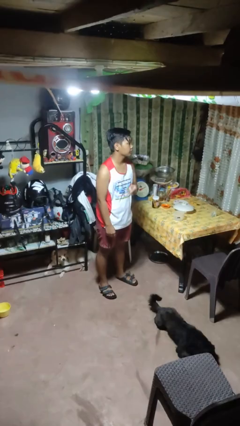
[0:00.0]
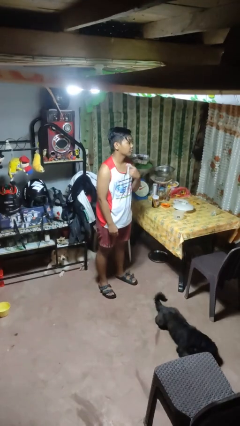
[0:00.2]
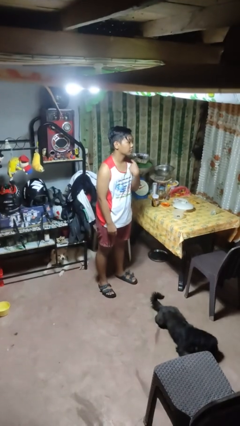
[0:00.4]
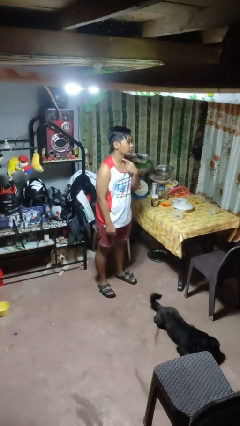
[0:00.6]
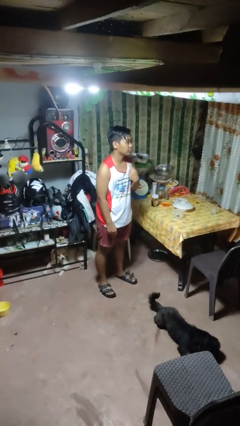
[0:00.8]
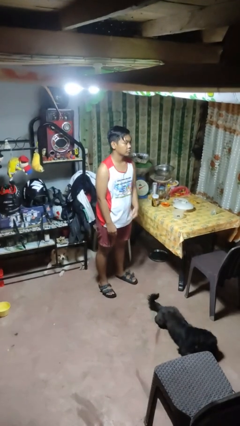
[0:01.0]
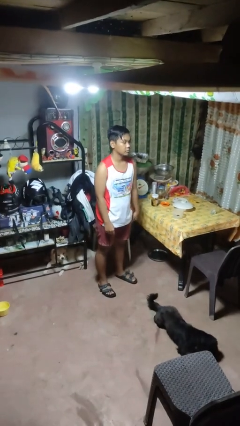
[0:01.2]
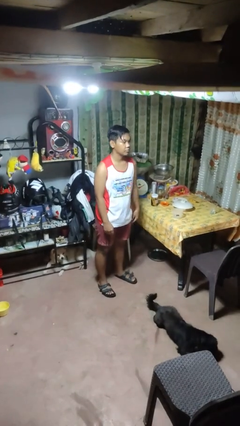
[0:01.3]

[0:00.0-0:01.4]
person gestures cut

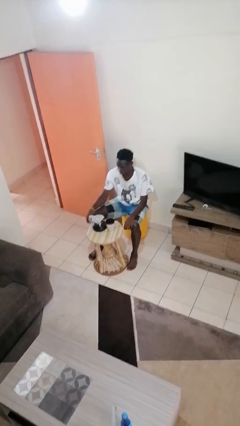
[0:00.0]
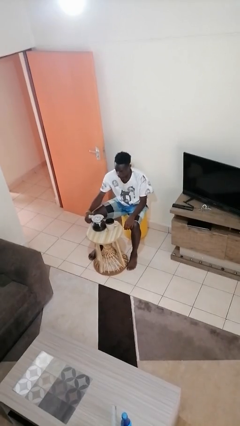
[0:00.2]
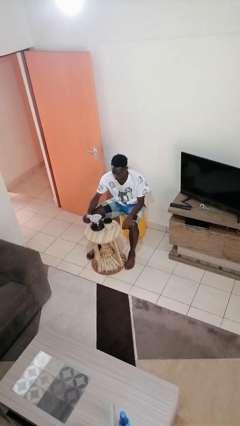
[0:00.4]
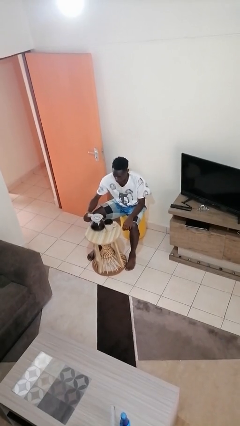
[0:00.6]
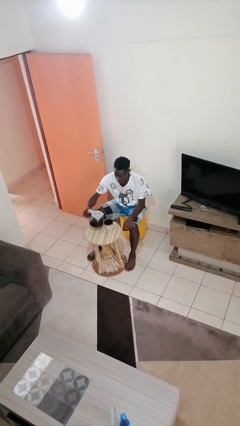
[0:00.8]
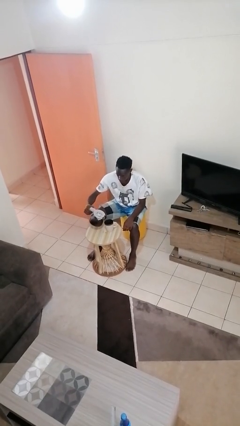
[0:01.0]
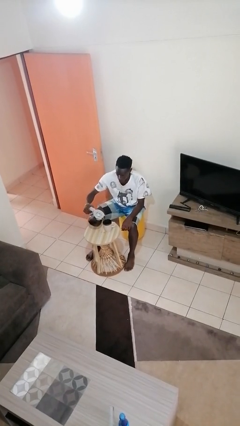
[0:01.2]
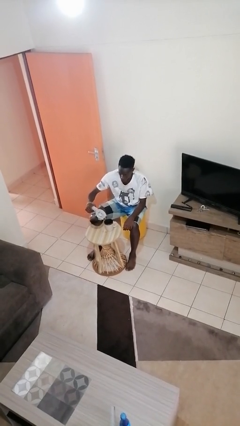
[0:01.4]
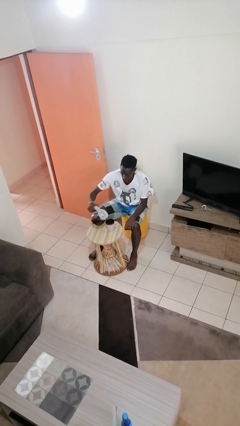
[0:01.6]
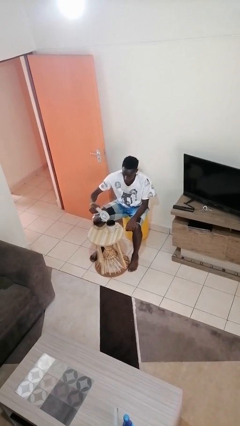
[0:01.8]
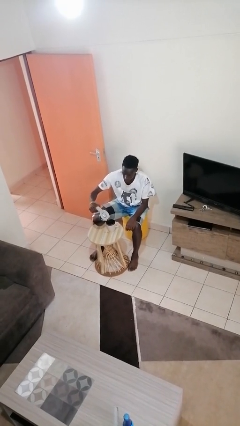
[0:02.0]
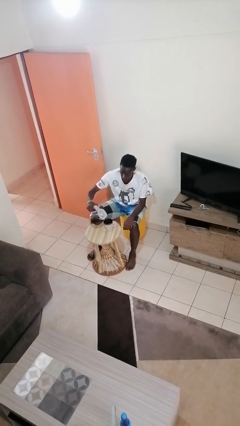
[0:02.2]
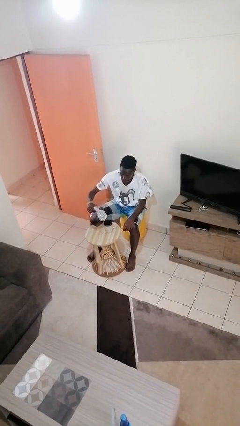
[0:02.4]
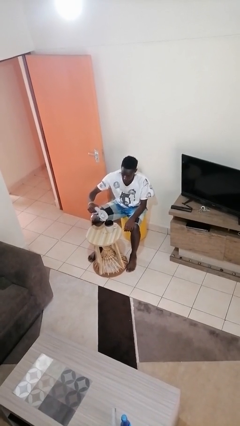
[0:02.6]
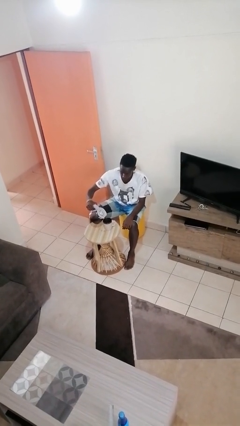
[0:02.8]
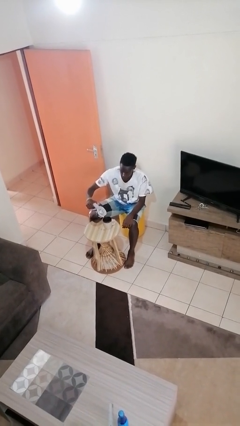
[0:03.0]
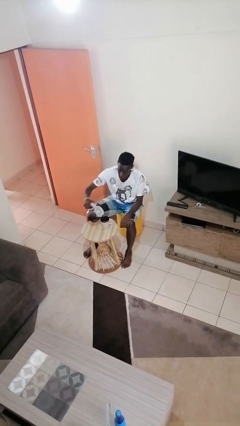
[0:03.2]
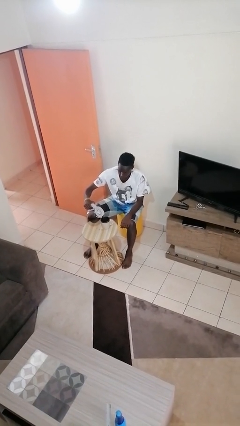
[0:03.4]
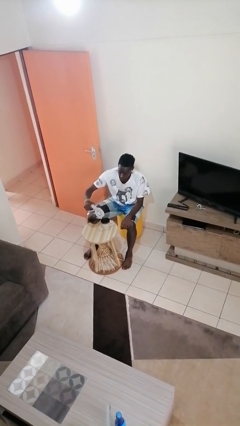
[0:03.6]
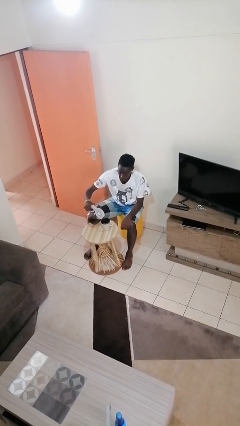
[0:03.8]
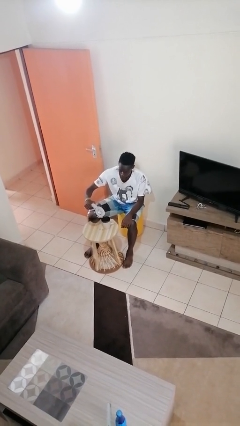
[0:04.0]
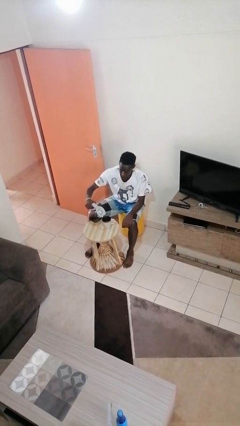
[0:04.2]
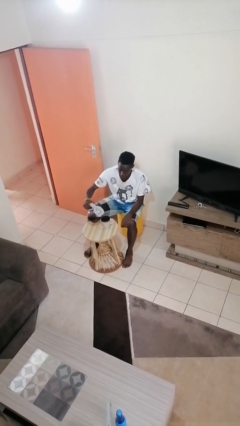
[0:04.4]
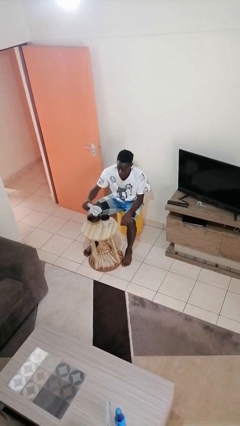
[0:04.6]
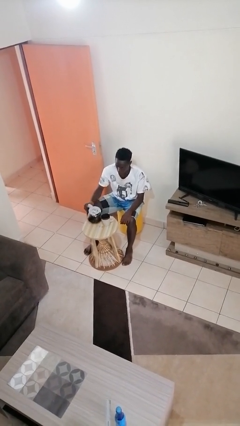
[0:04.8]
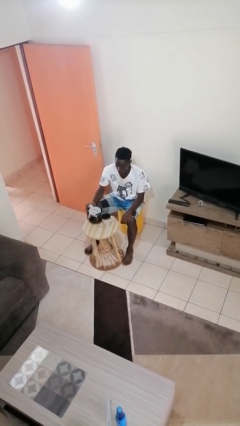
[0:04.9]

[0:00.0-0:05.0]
person pours coffee into mug

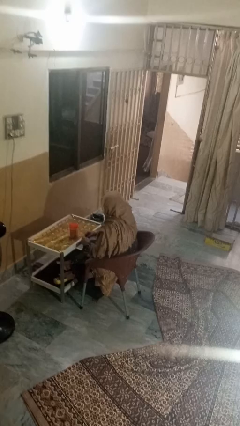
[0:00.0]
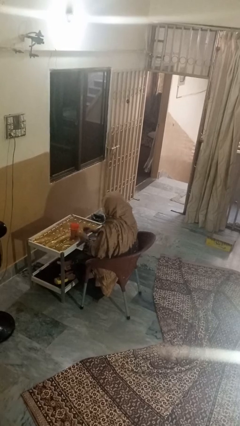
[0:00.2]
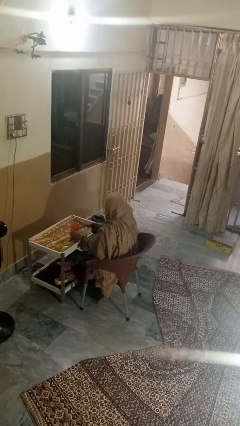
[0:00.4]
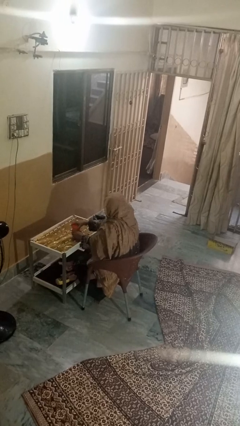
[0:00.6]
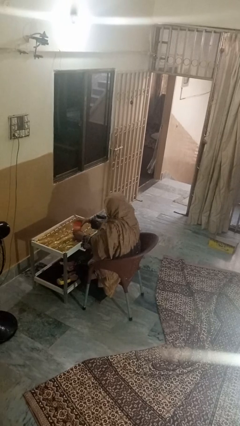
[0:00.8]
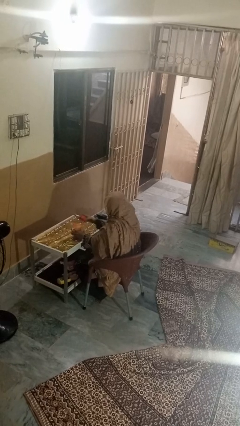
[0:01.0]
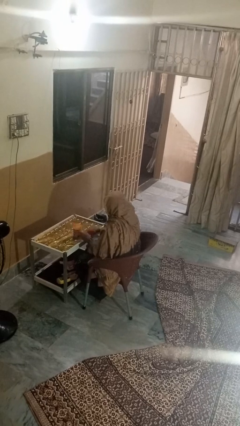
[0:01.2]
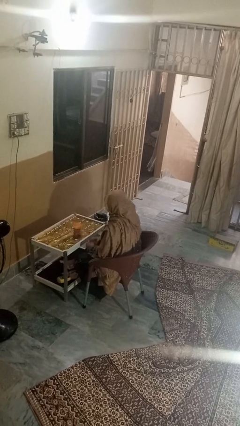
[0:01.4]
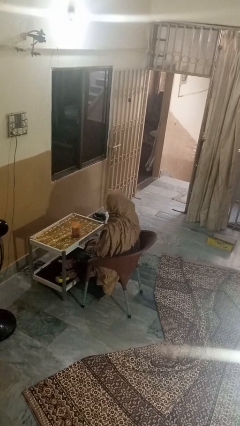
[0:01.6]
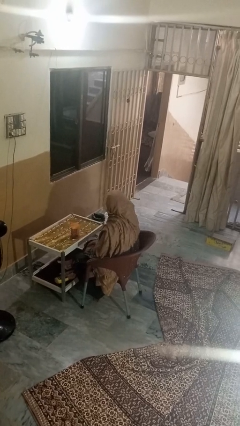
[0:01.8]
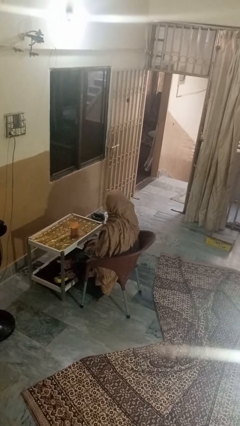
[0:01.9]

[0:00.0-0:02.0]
person opens jar

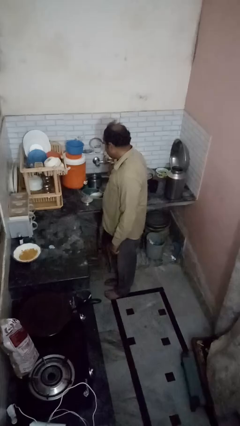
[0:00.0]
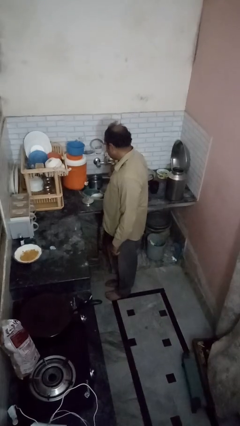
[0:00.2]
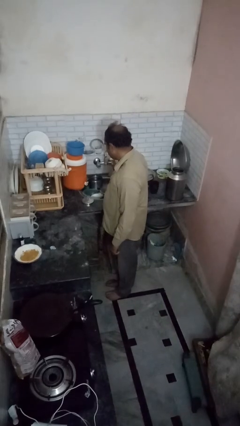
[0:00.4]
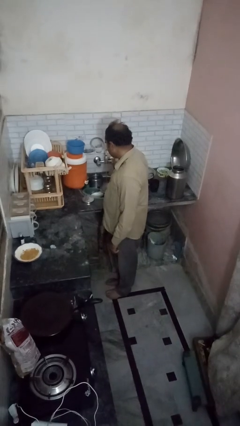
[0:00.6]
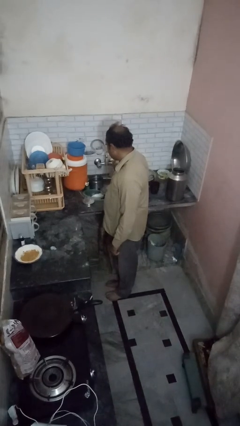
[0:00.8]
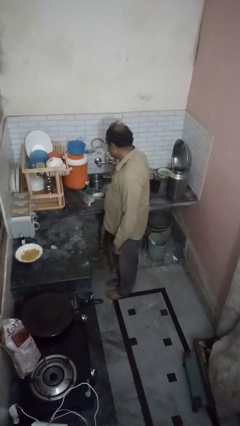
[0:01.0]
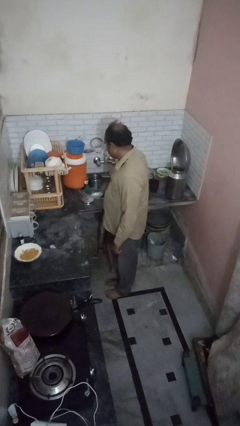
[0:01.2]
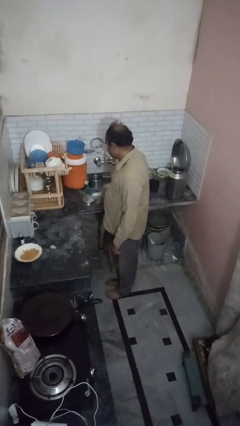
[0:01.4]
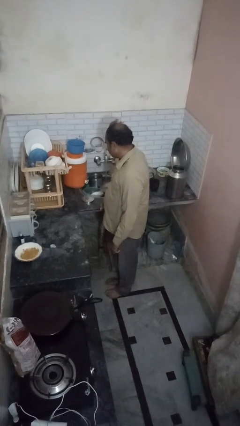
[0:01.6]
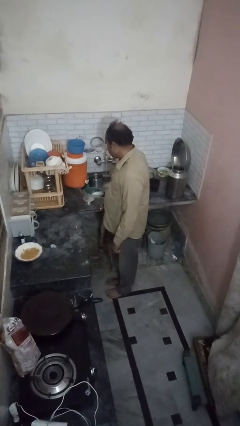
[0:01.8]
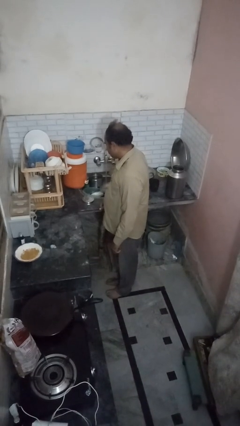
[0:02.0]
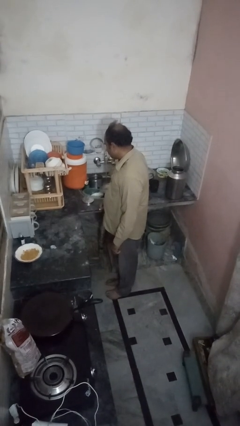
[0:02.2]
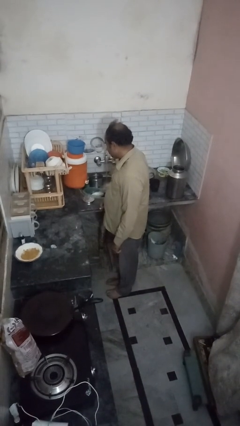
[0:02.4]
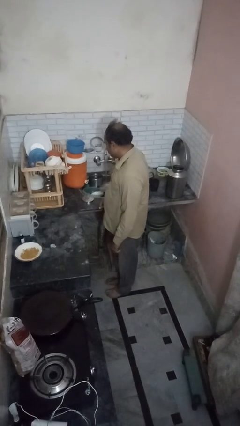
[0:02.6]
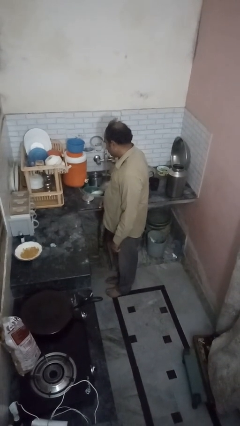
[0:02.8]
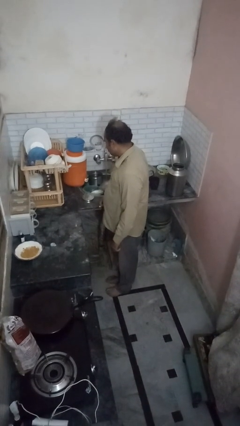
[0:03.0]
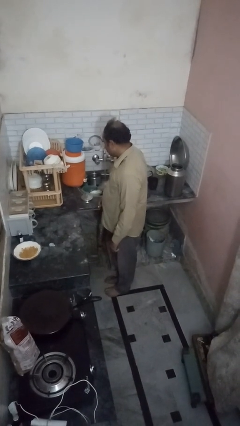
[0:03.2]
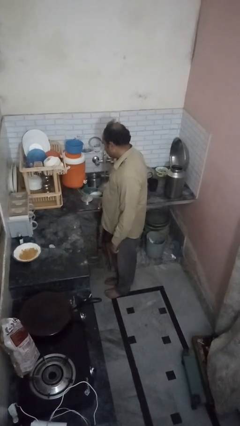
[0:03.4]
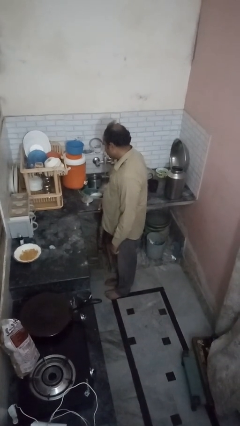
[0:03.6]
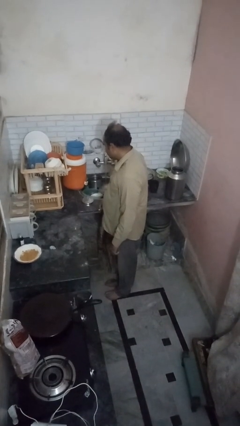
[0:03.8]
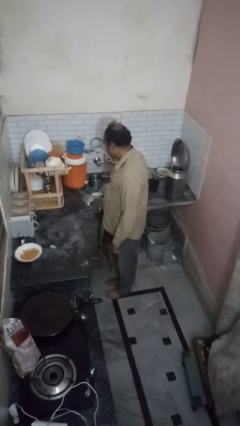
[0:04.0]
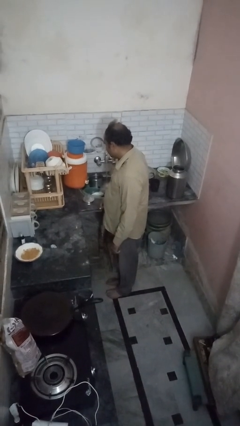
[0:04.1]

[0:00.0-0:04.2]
person opens dishwasher

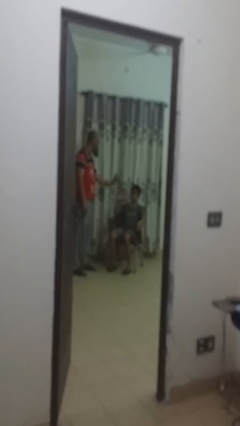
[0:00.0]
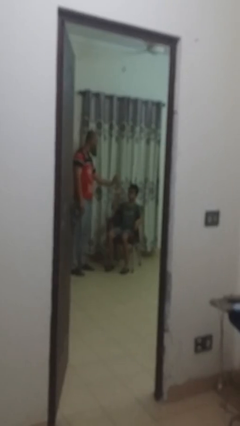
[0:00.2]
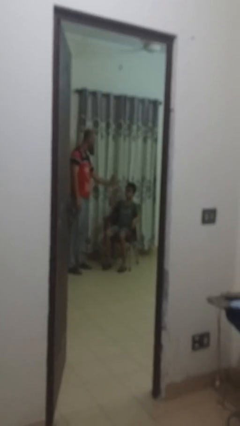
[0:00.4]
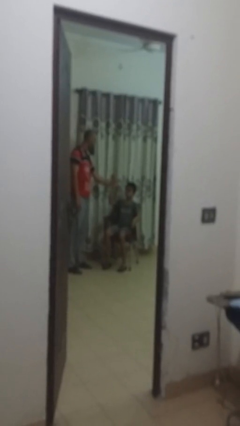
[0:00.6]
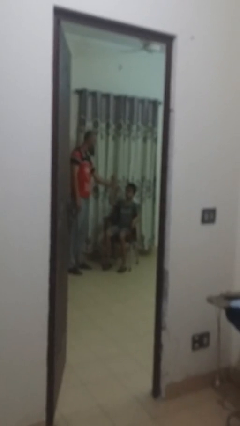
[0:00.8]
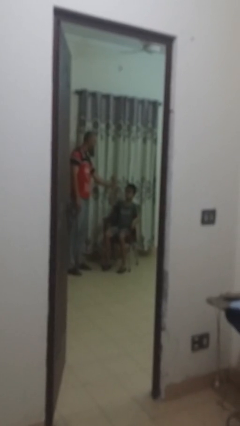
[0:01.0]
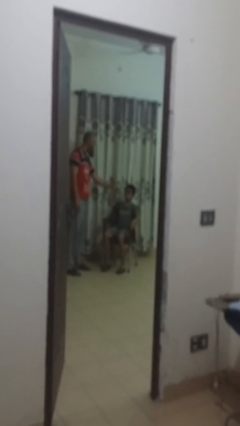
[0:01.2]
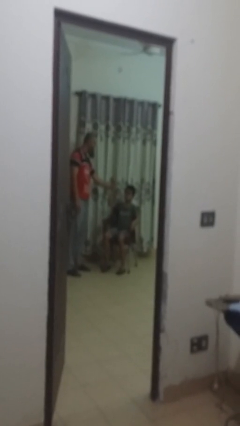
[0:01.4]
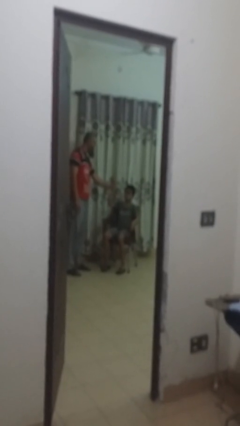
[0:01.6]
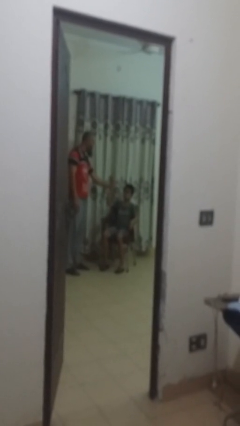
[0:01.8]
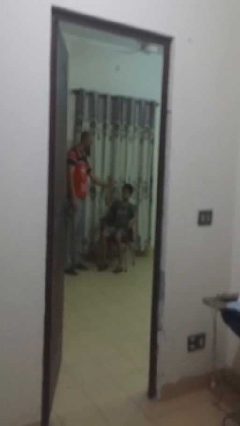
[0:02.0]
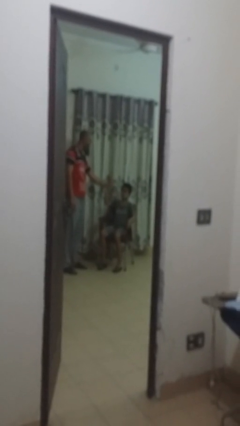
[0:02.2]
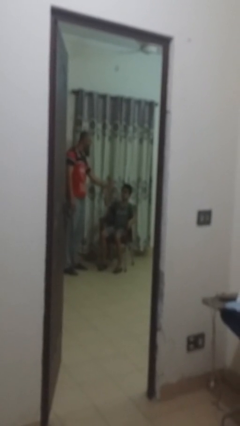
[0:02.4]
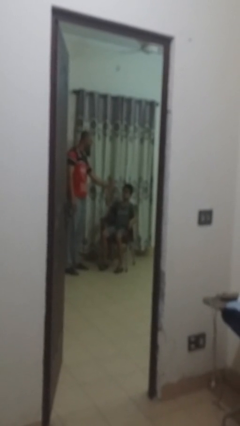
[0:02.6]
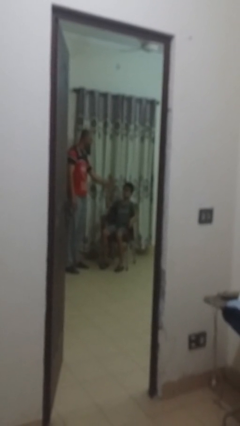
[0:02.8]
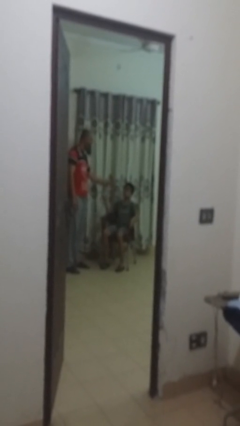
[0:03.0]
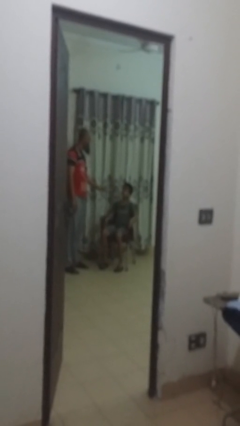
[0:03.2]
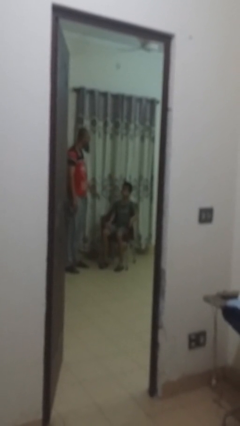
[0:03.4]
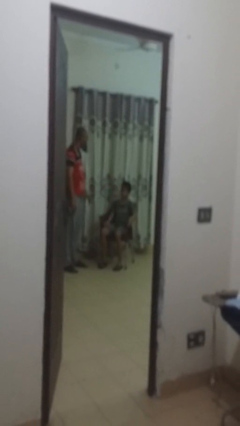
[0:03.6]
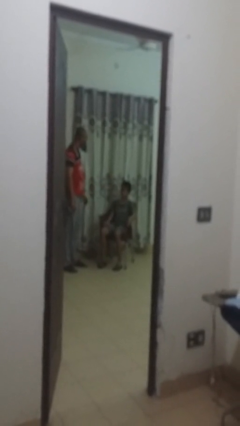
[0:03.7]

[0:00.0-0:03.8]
person highfives hand

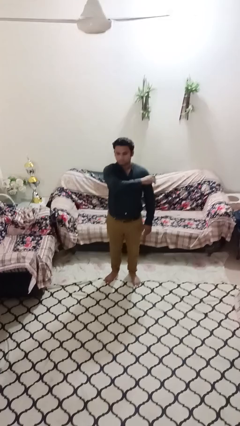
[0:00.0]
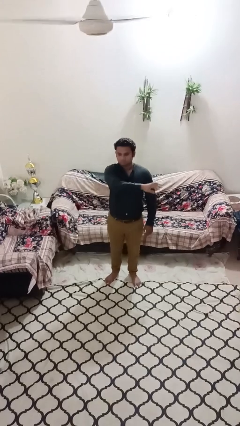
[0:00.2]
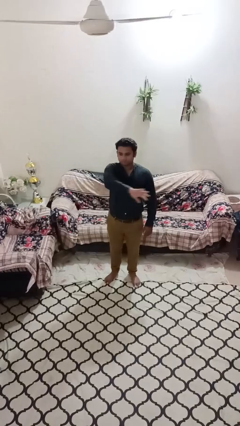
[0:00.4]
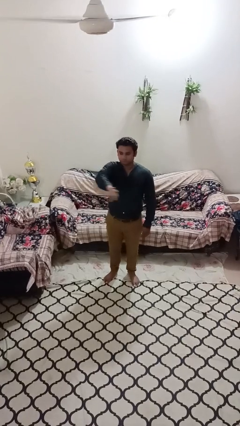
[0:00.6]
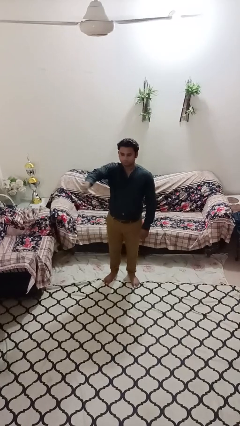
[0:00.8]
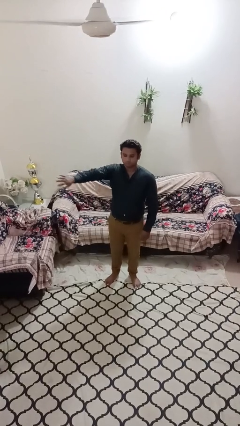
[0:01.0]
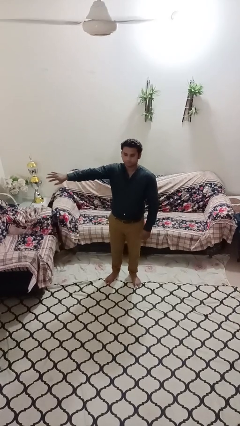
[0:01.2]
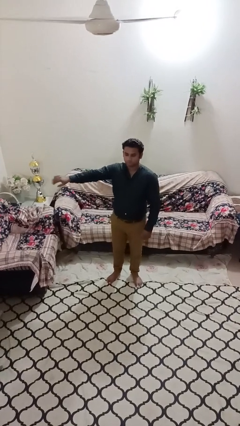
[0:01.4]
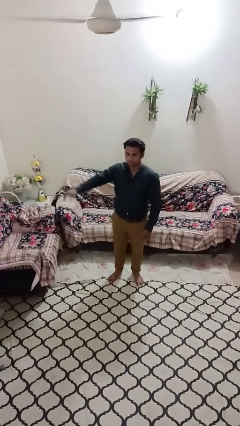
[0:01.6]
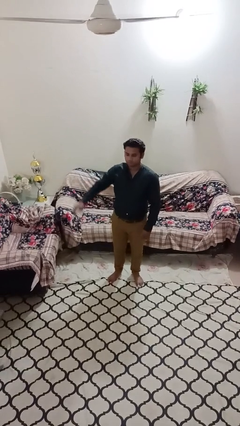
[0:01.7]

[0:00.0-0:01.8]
person gestures swipe right
